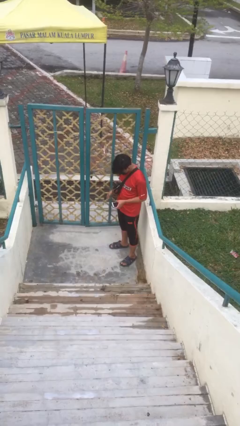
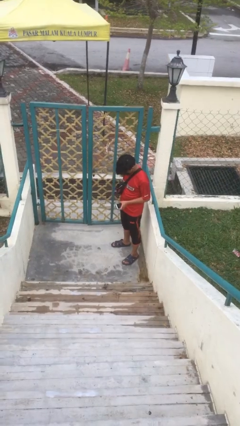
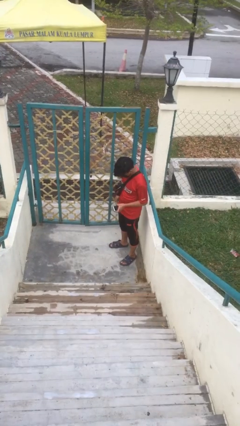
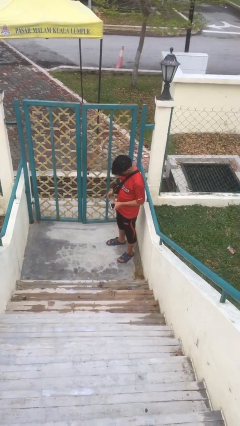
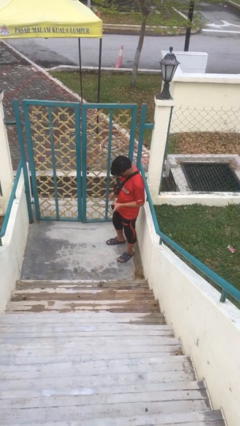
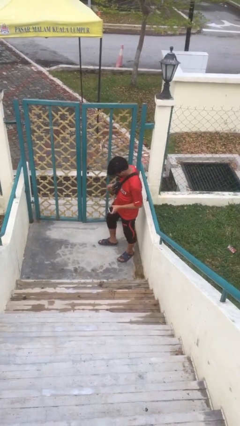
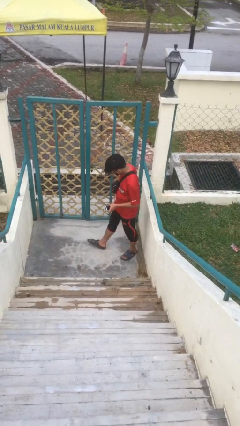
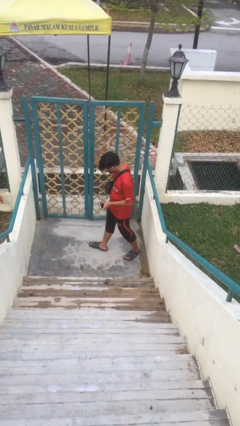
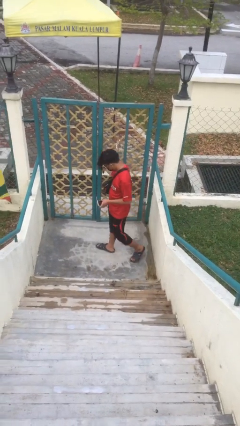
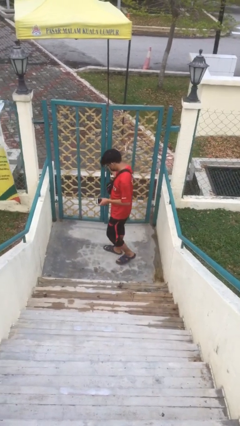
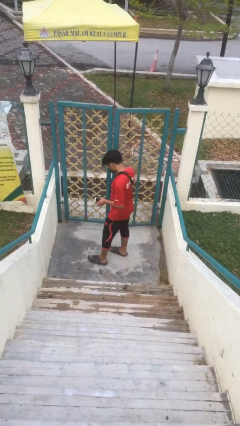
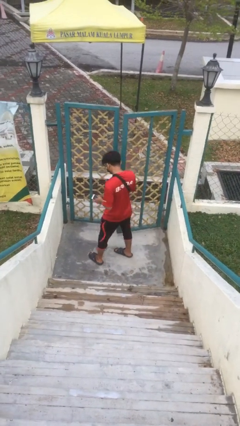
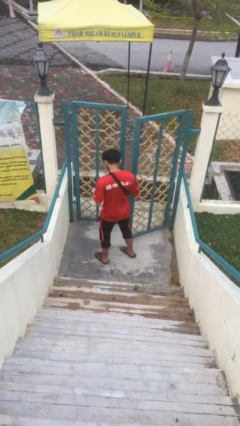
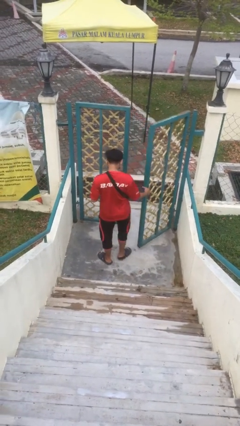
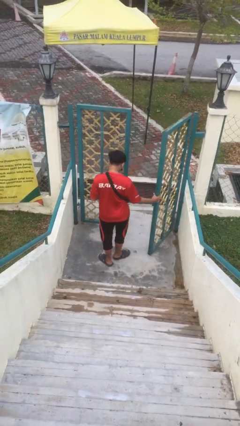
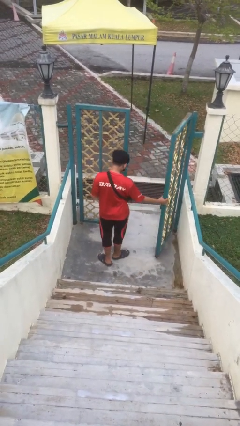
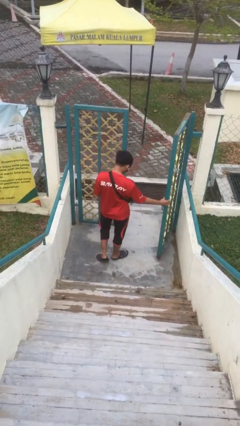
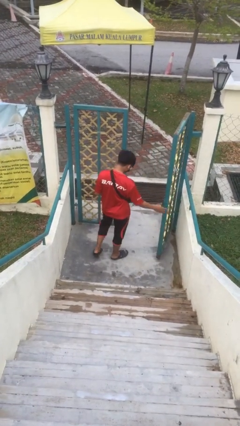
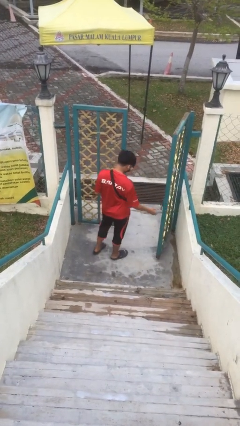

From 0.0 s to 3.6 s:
person opens facility door

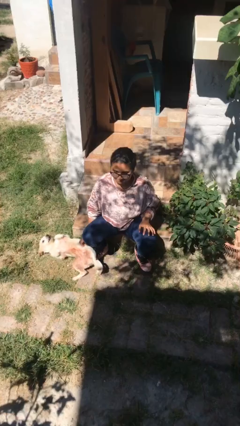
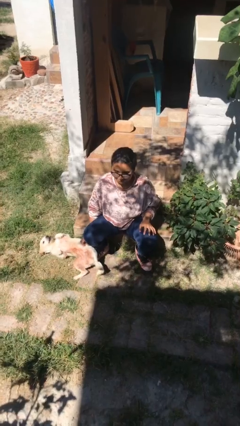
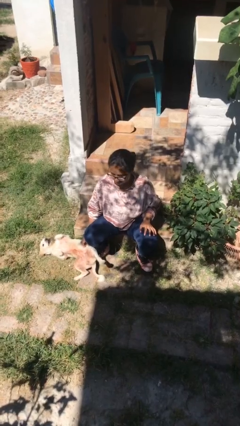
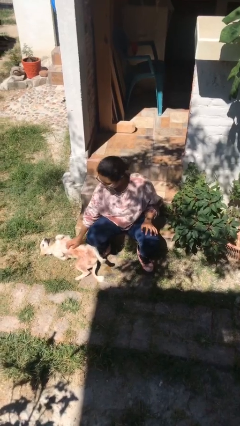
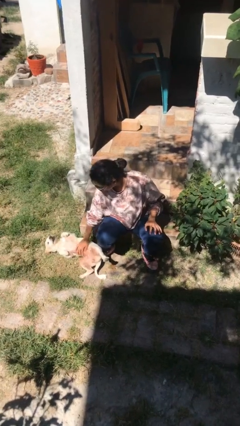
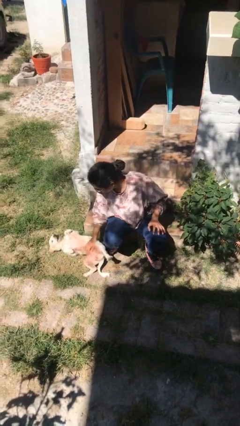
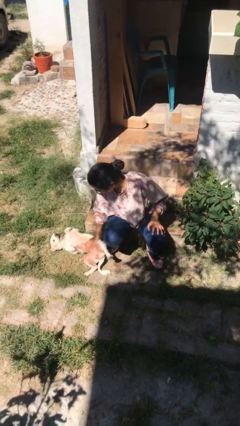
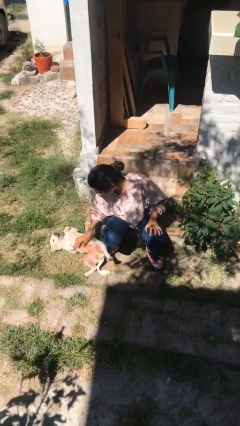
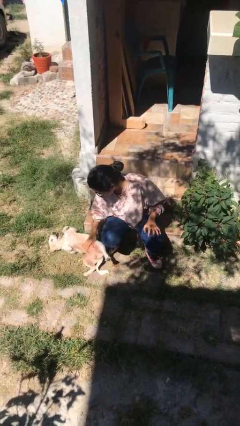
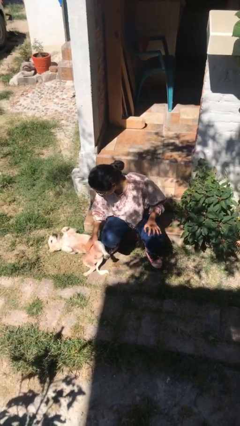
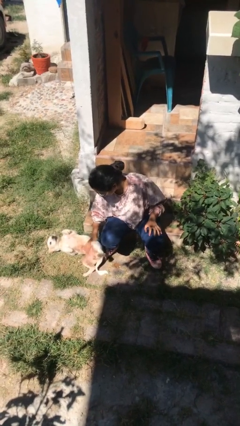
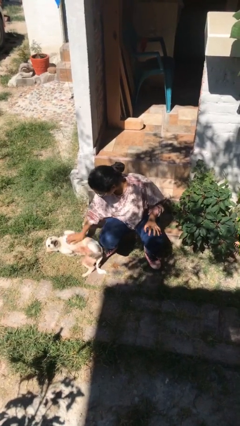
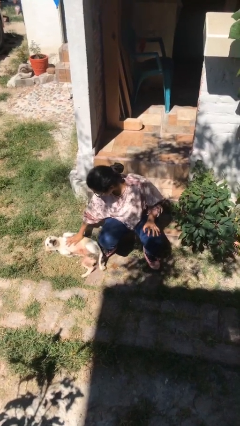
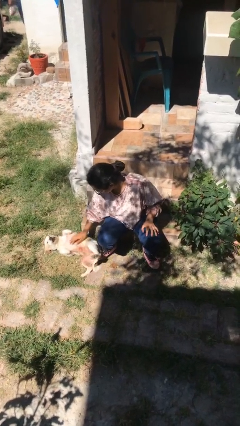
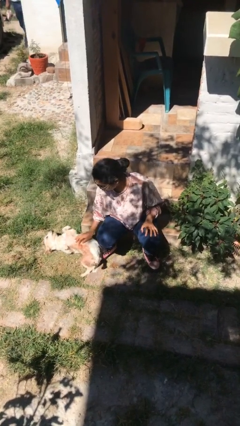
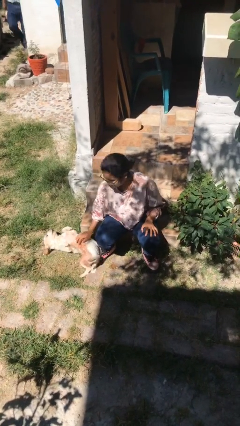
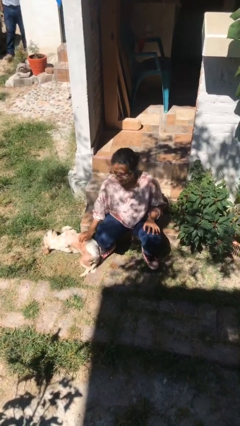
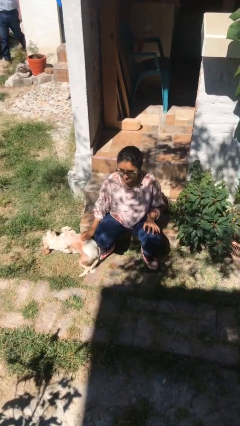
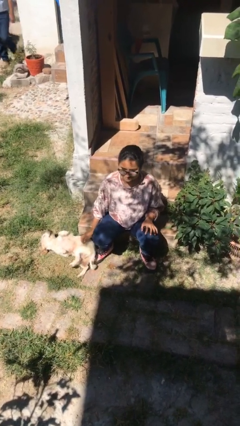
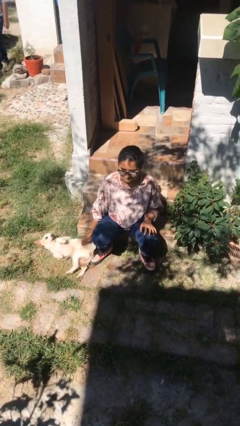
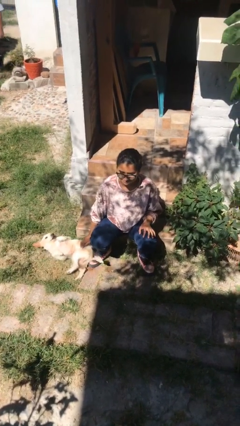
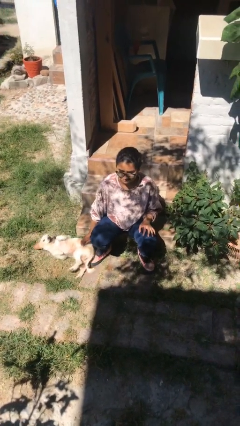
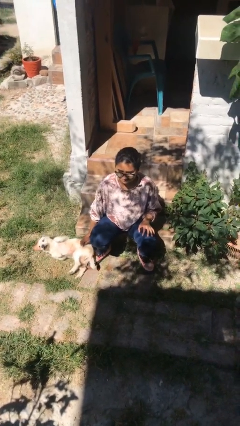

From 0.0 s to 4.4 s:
person pets dog

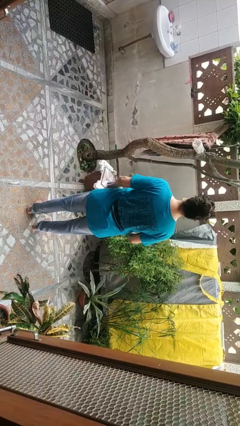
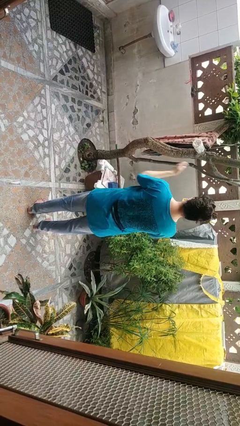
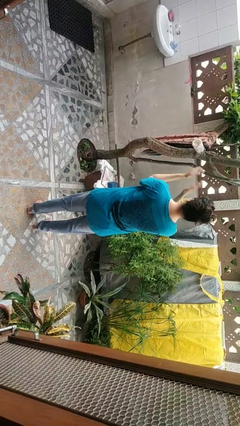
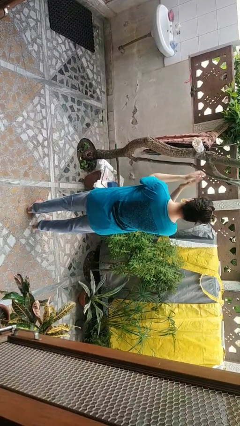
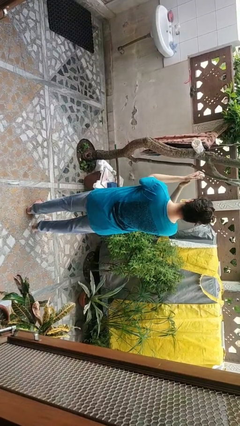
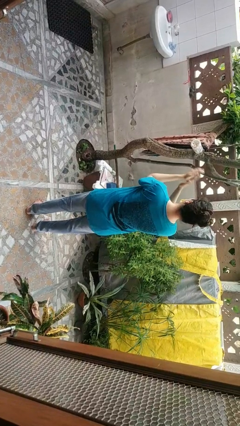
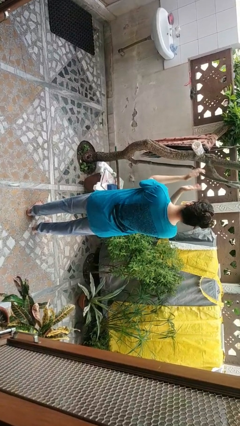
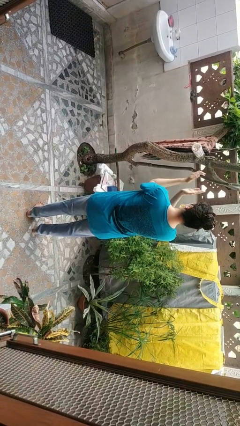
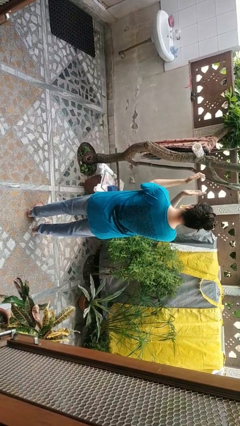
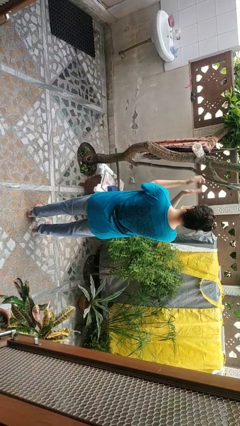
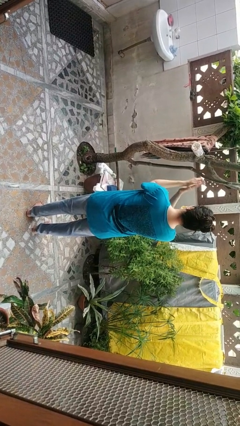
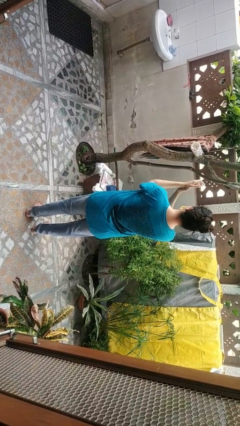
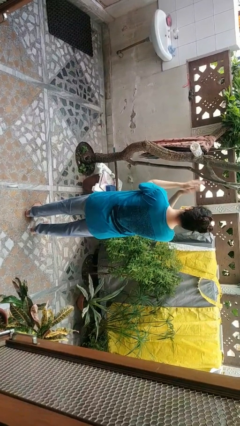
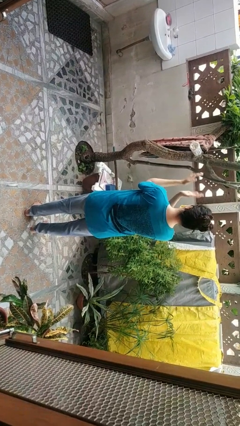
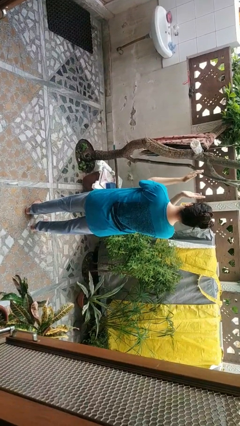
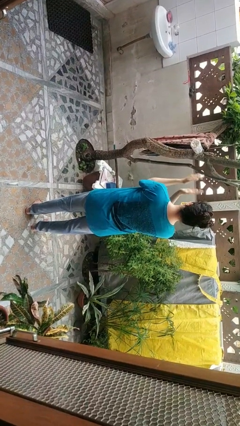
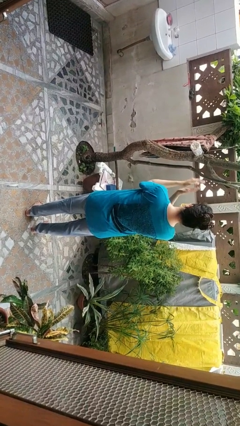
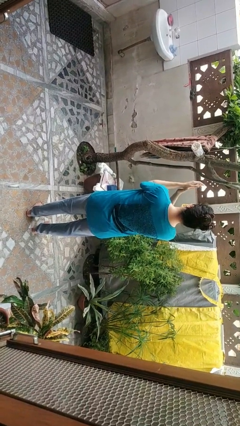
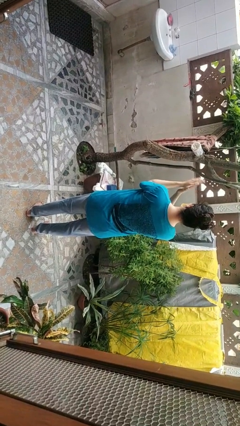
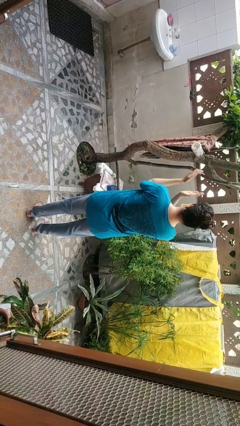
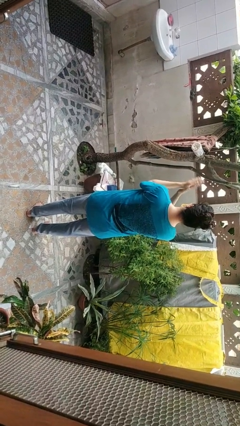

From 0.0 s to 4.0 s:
person claps hands

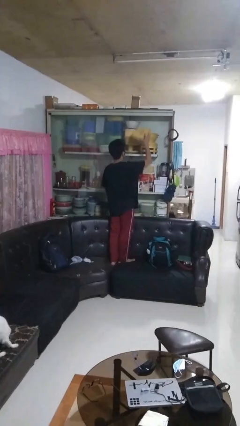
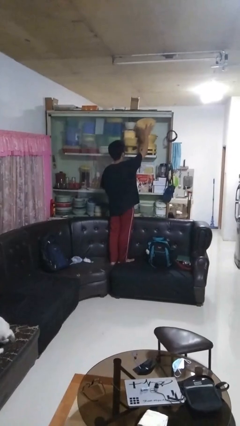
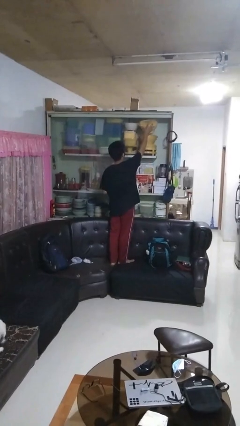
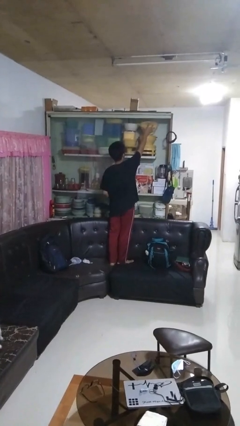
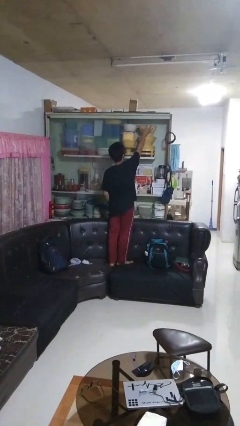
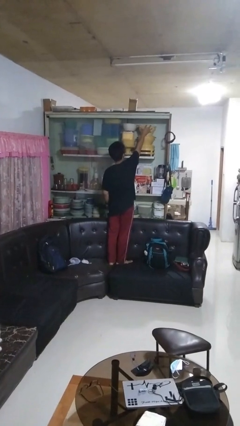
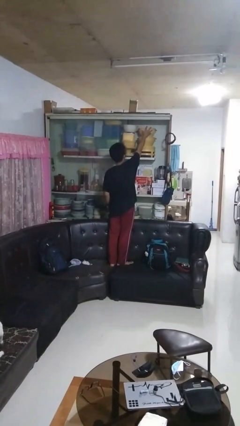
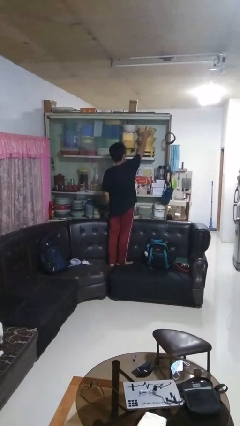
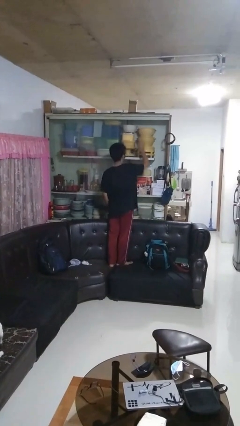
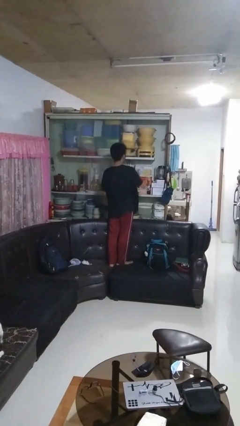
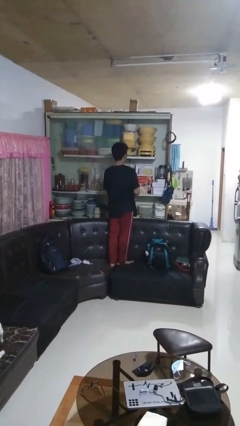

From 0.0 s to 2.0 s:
person puts down object into cabinet

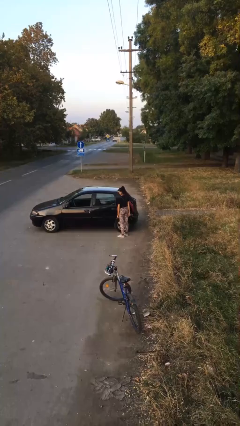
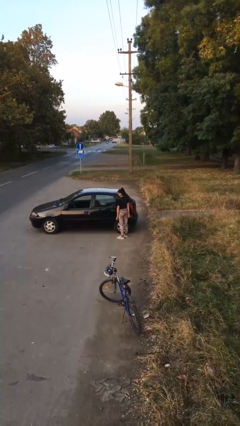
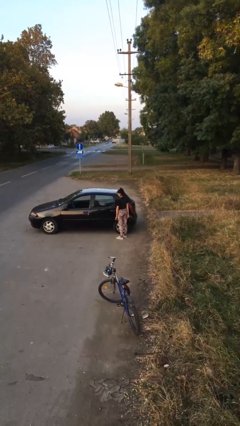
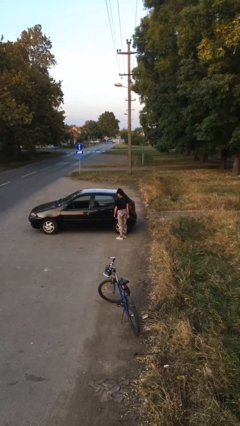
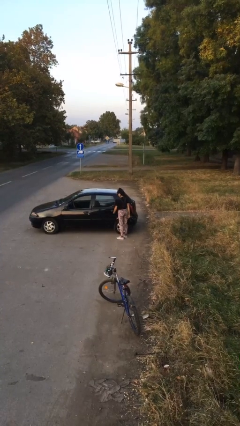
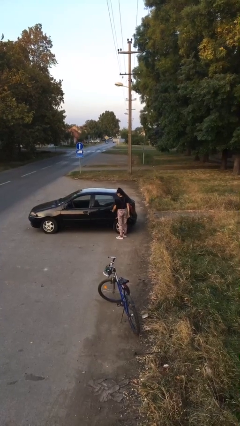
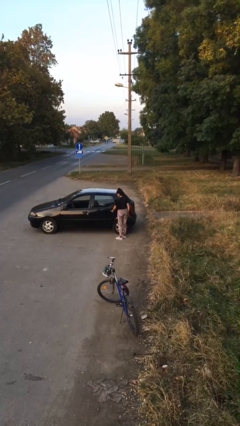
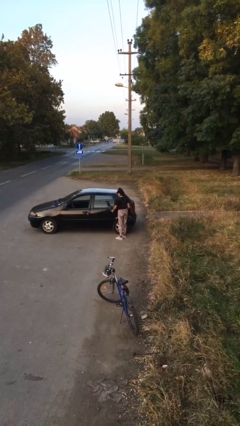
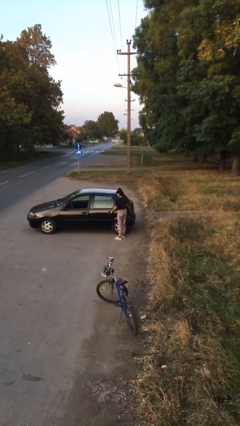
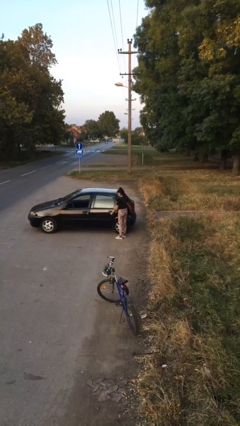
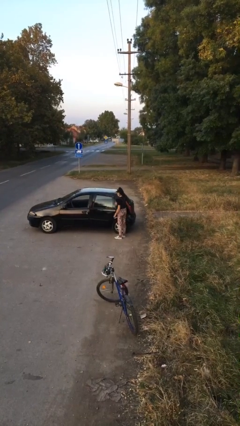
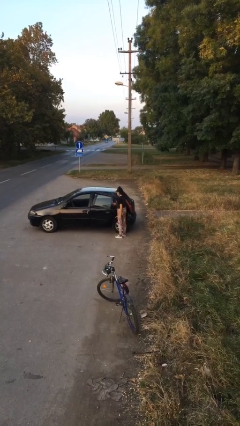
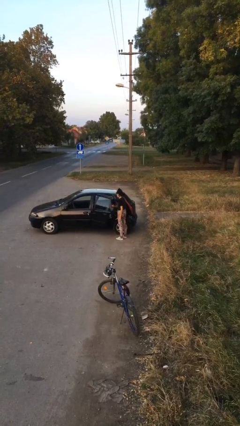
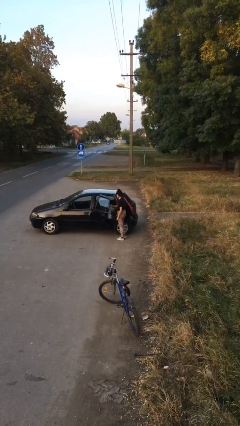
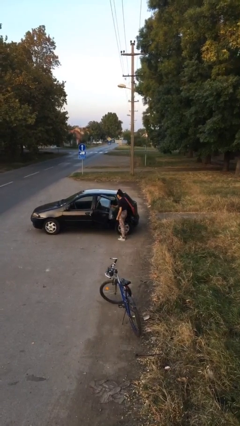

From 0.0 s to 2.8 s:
person opens car door

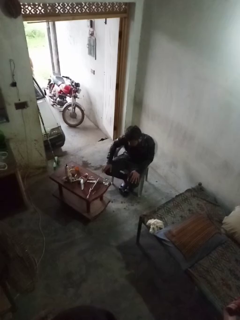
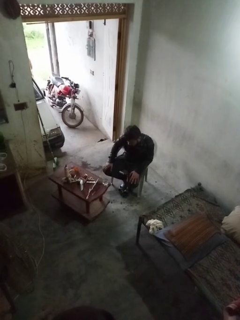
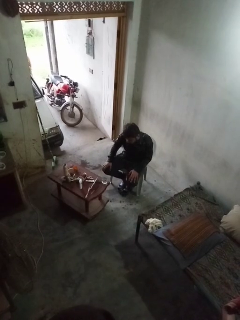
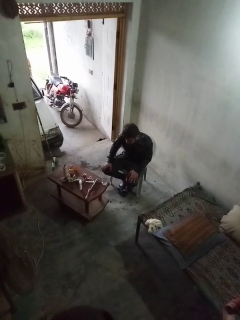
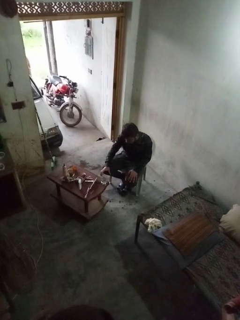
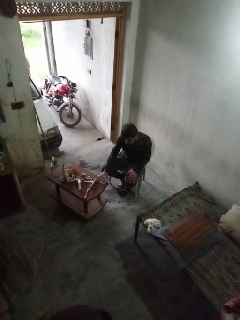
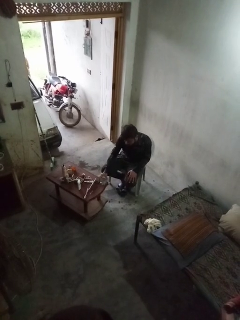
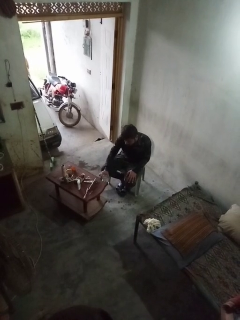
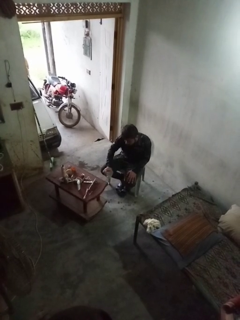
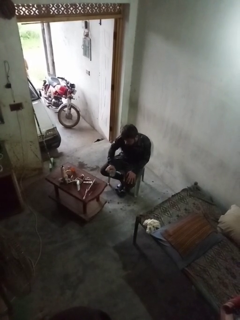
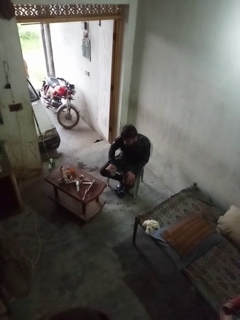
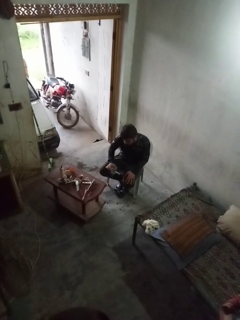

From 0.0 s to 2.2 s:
person picks up object from table
